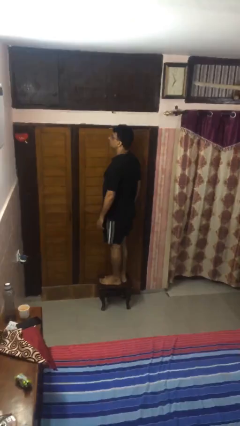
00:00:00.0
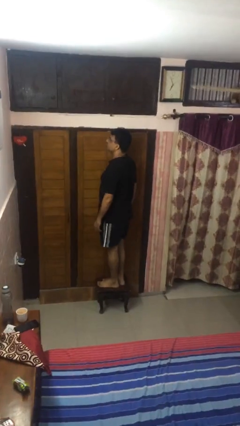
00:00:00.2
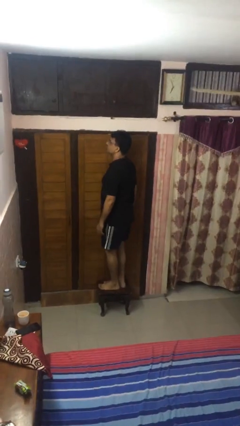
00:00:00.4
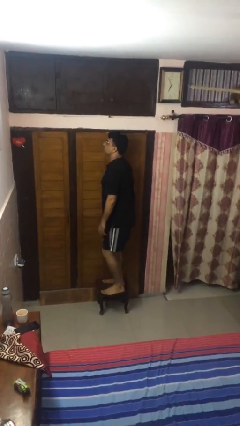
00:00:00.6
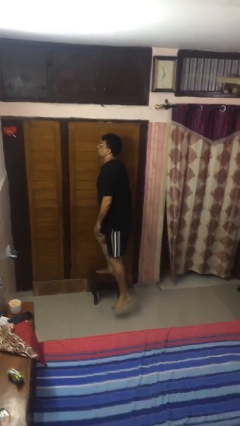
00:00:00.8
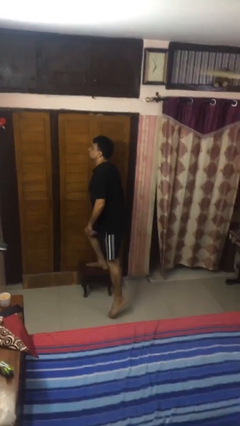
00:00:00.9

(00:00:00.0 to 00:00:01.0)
person climbs off table

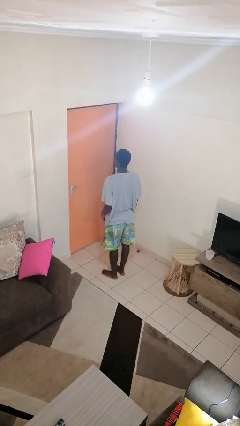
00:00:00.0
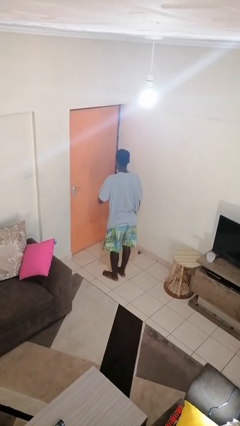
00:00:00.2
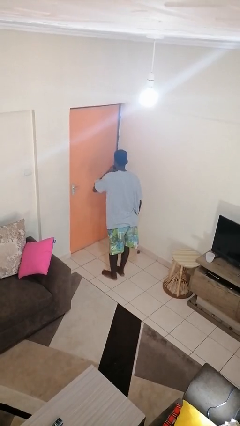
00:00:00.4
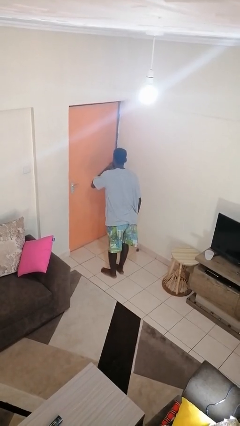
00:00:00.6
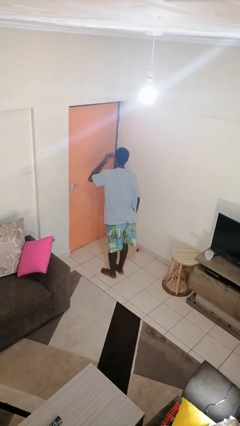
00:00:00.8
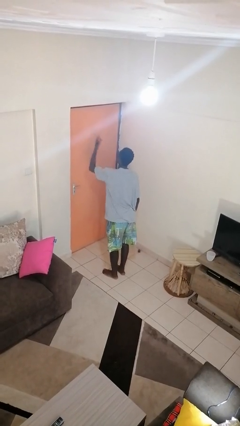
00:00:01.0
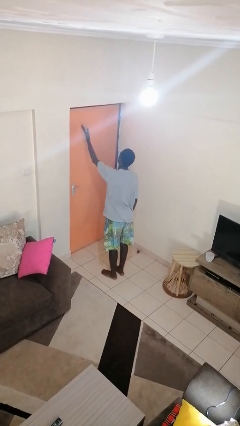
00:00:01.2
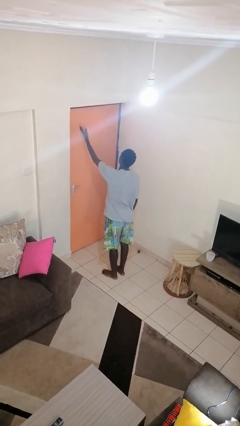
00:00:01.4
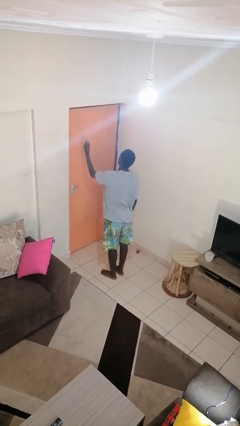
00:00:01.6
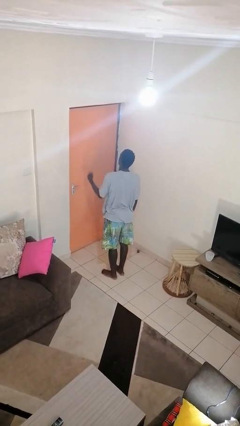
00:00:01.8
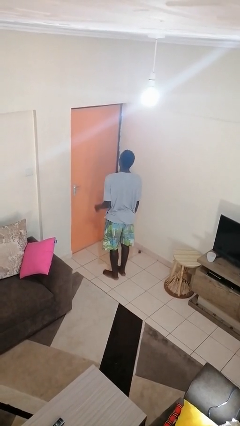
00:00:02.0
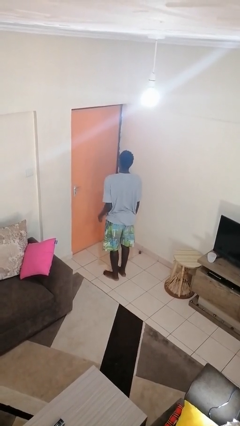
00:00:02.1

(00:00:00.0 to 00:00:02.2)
person gestures blow kiss

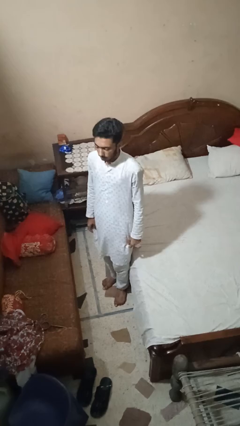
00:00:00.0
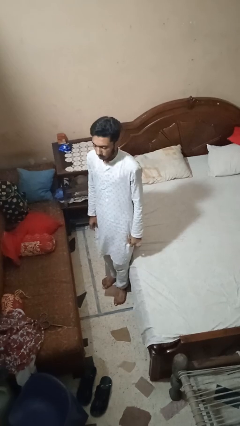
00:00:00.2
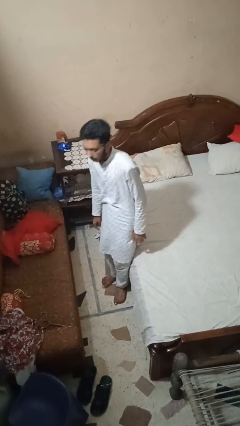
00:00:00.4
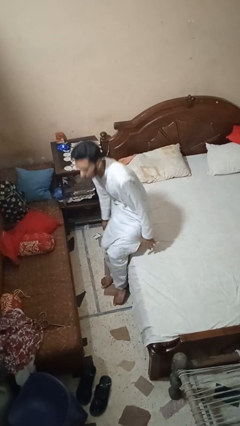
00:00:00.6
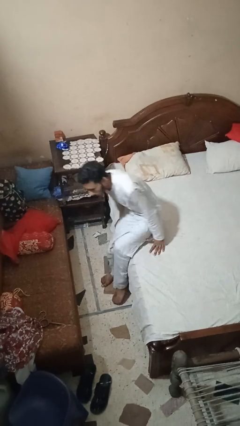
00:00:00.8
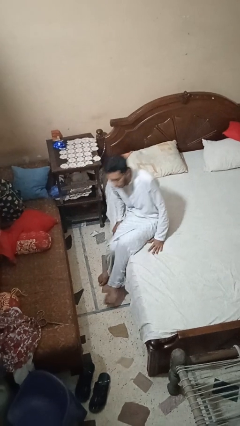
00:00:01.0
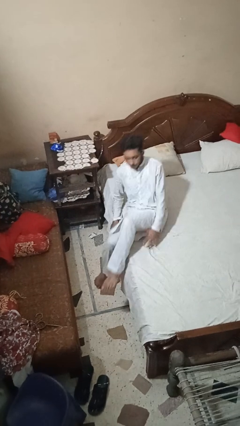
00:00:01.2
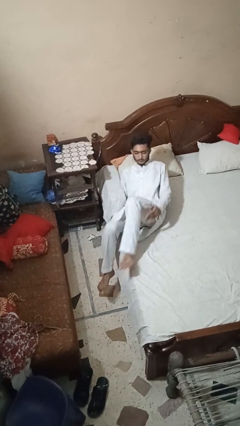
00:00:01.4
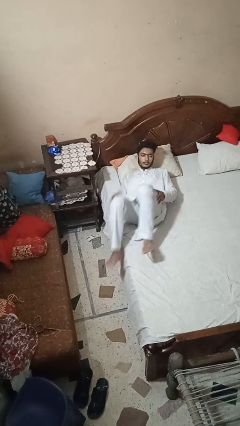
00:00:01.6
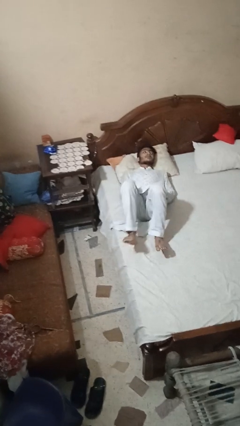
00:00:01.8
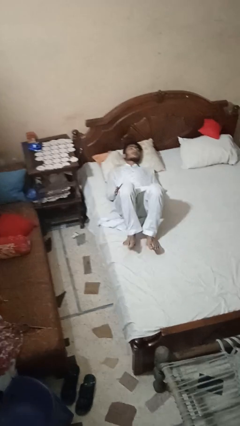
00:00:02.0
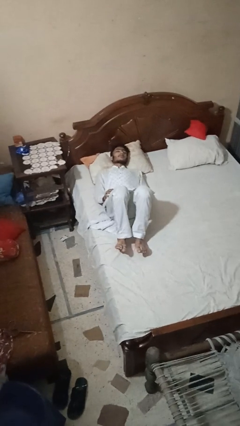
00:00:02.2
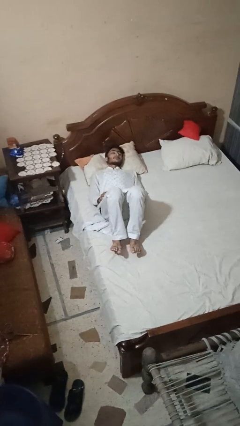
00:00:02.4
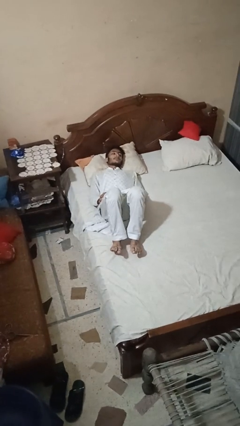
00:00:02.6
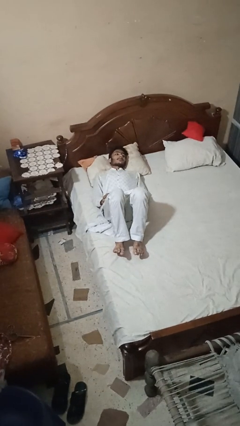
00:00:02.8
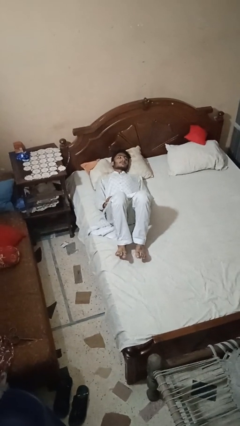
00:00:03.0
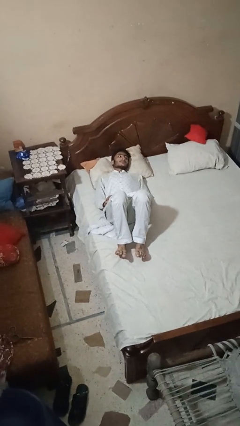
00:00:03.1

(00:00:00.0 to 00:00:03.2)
person lies down on bed

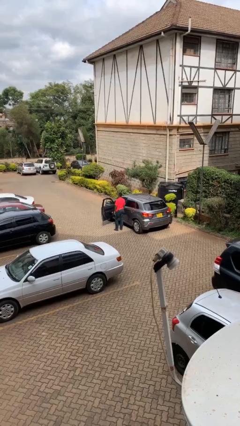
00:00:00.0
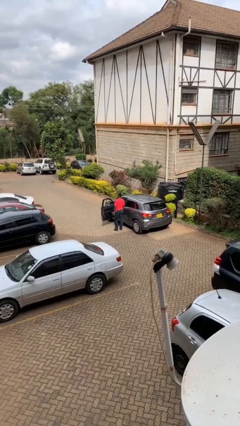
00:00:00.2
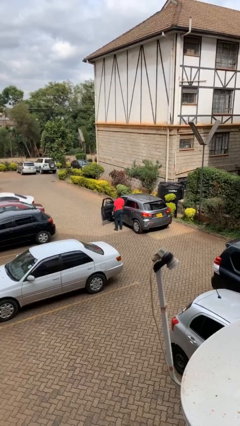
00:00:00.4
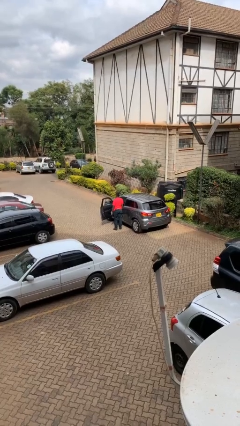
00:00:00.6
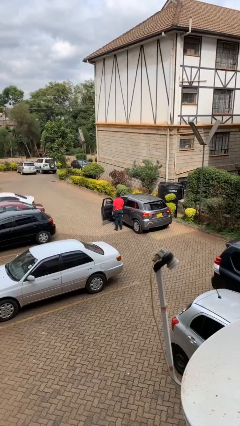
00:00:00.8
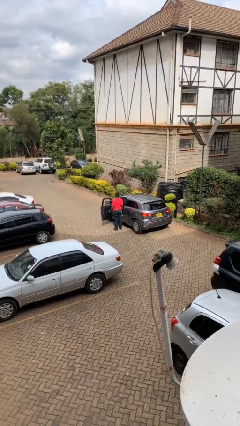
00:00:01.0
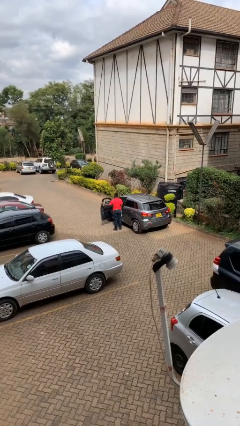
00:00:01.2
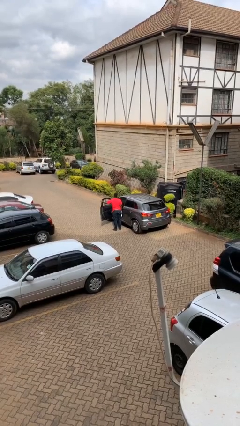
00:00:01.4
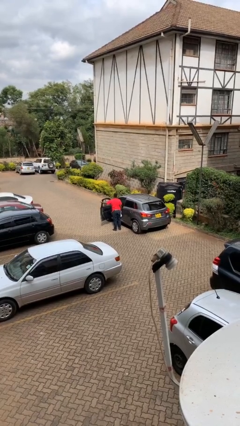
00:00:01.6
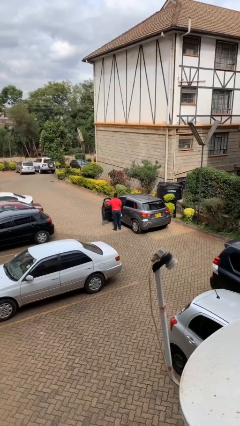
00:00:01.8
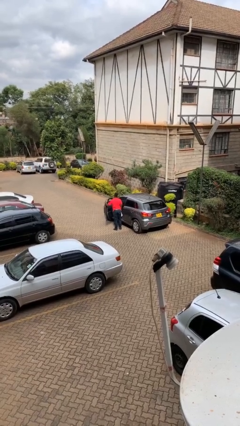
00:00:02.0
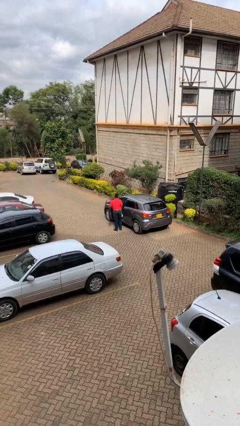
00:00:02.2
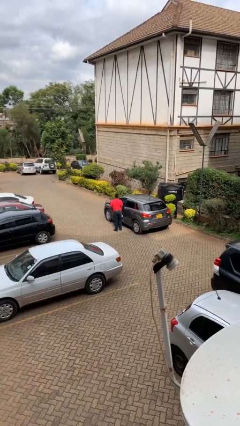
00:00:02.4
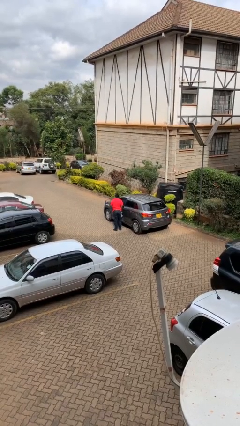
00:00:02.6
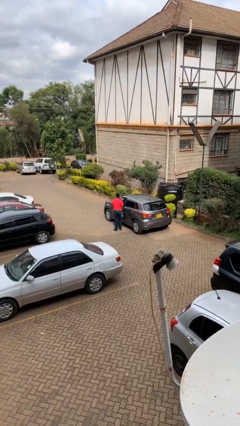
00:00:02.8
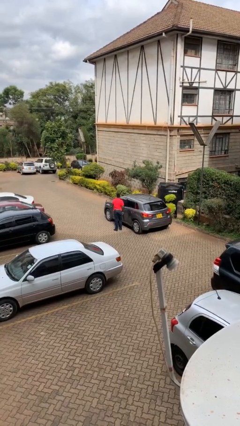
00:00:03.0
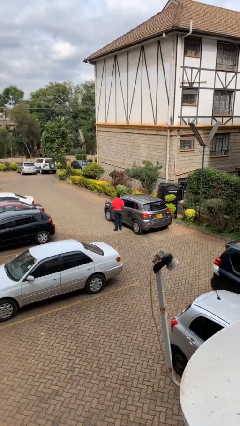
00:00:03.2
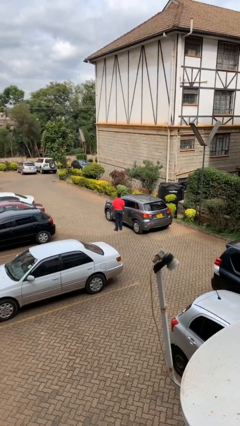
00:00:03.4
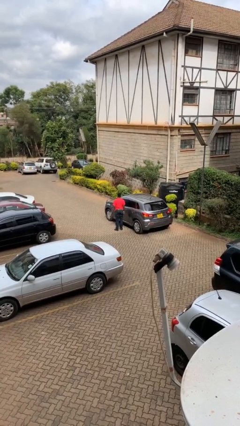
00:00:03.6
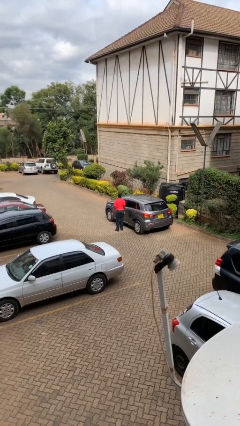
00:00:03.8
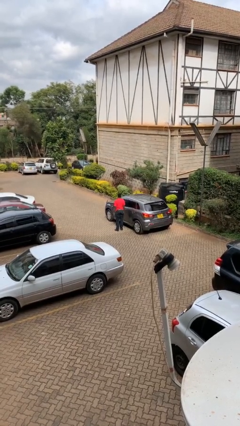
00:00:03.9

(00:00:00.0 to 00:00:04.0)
person closes car door

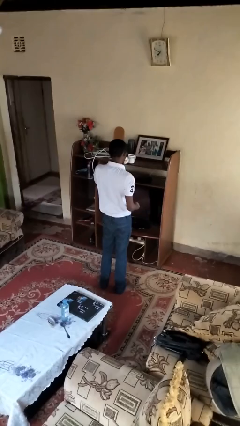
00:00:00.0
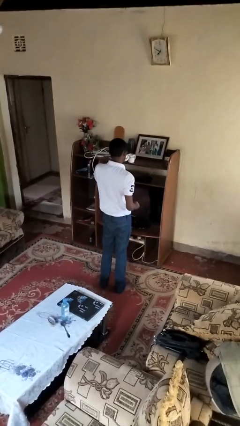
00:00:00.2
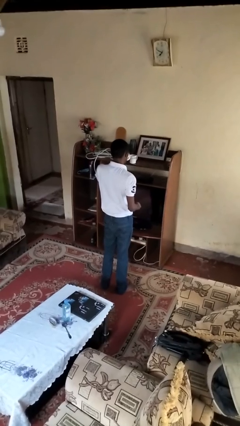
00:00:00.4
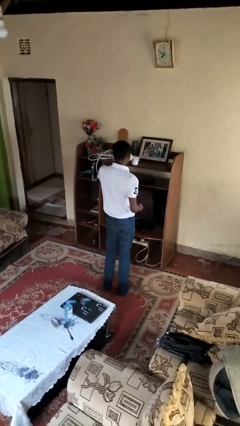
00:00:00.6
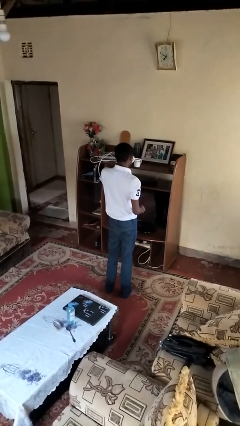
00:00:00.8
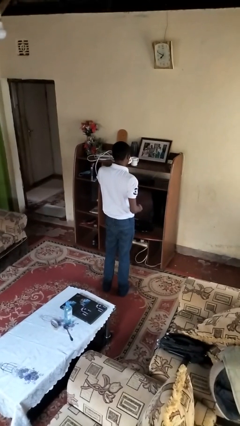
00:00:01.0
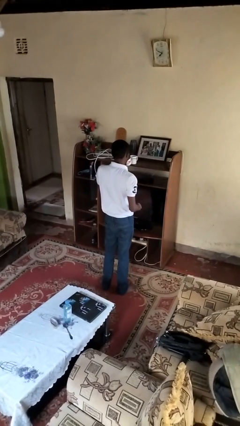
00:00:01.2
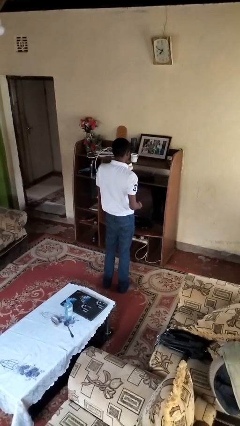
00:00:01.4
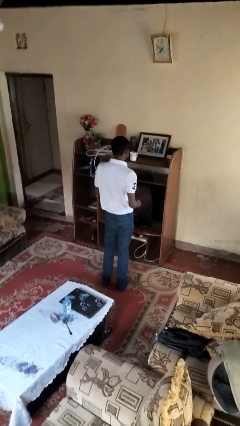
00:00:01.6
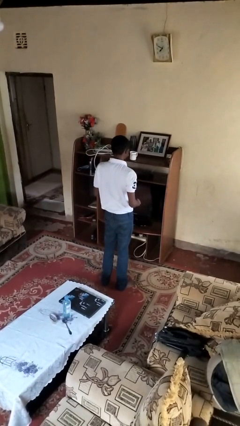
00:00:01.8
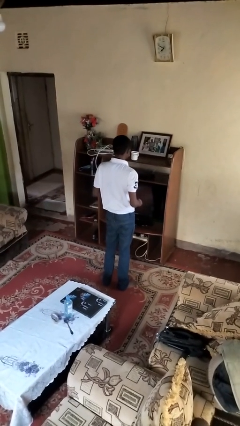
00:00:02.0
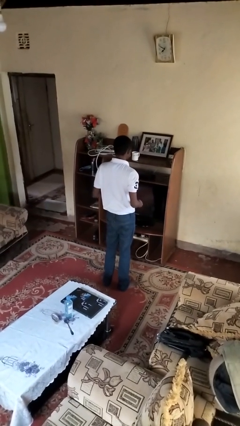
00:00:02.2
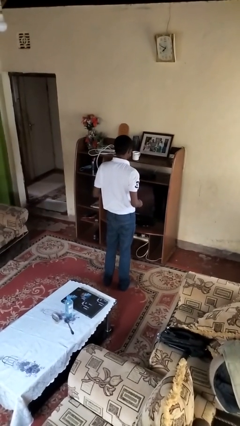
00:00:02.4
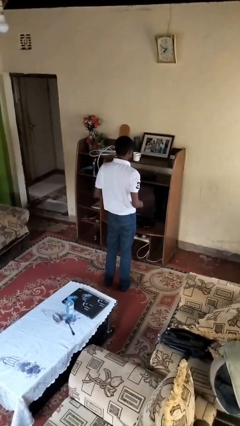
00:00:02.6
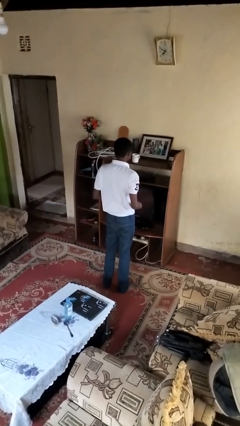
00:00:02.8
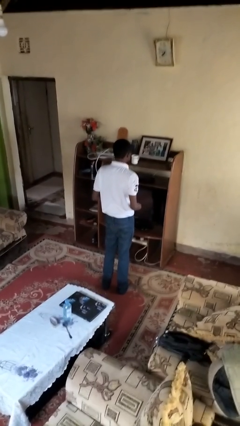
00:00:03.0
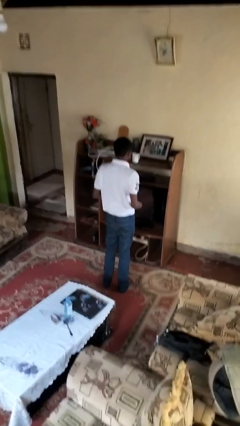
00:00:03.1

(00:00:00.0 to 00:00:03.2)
person drinks from cup

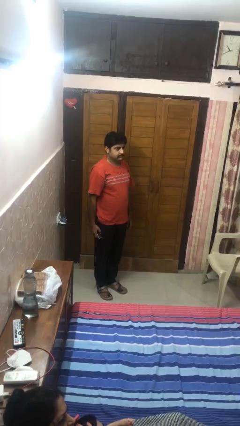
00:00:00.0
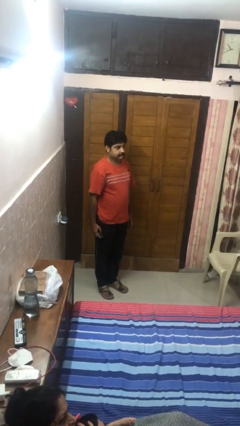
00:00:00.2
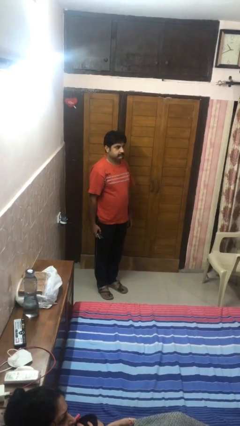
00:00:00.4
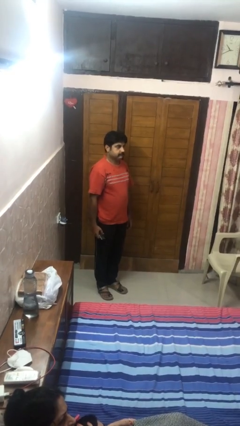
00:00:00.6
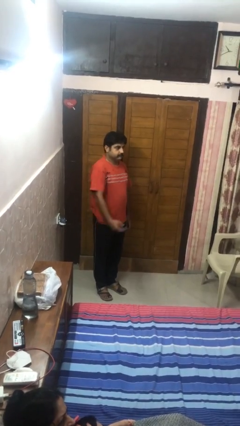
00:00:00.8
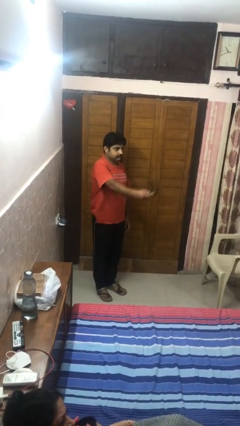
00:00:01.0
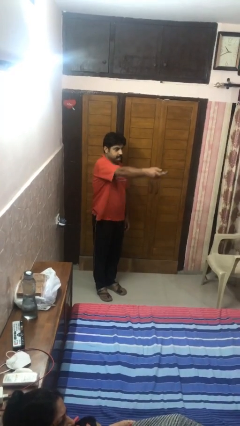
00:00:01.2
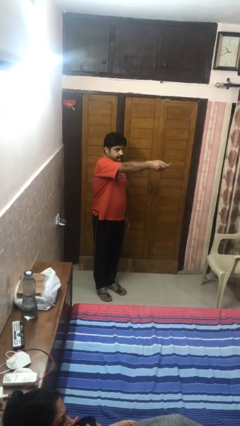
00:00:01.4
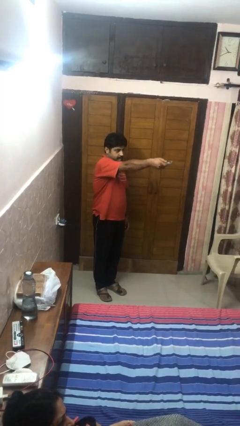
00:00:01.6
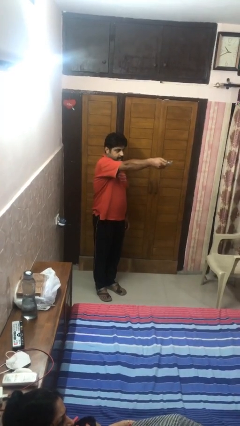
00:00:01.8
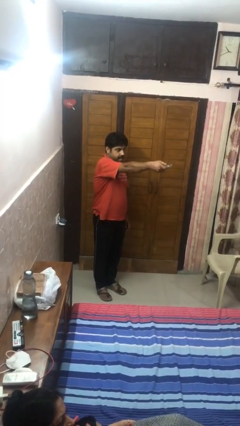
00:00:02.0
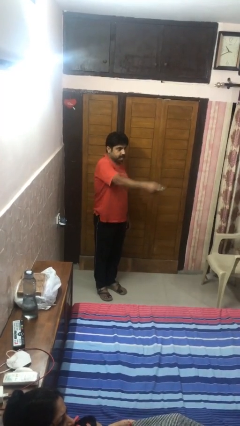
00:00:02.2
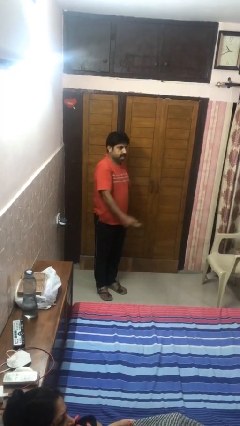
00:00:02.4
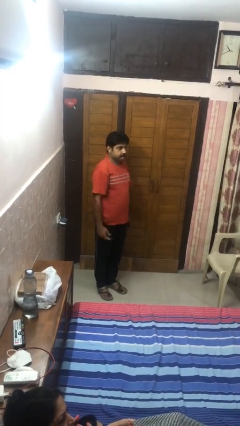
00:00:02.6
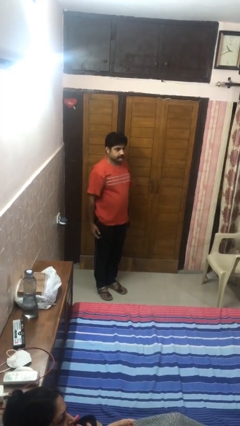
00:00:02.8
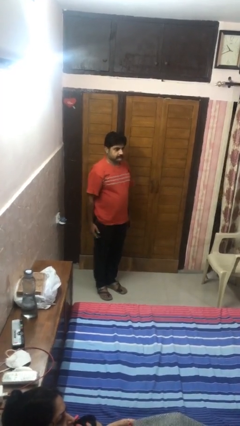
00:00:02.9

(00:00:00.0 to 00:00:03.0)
person uses television remote

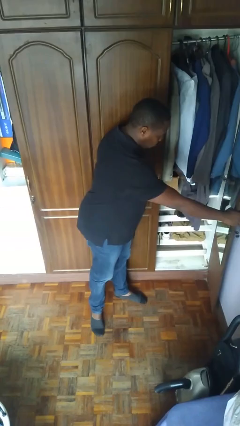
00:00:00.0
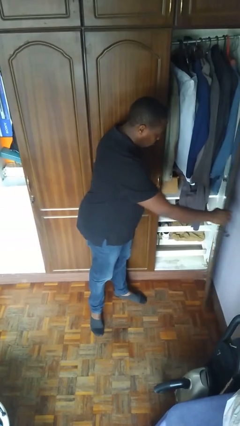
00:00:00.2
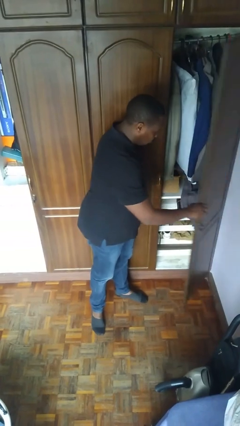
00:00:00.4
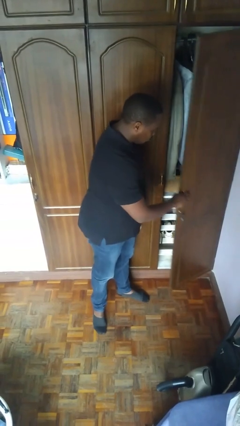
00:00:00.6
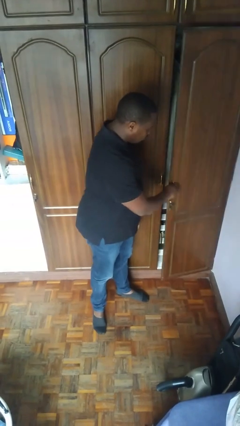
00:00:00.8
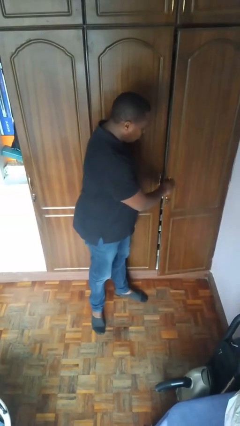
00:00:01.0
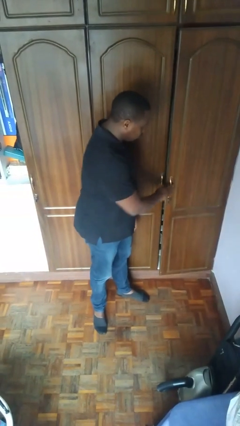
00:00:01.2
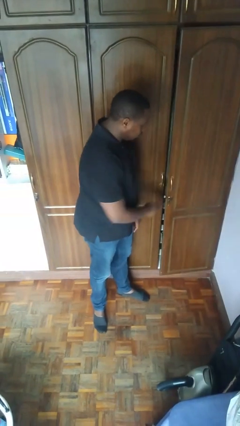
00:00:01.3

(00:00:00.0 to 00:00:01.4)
person closes closet door
